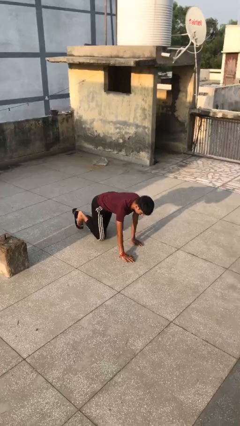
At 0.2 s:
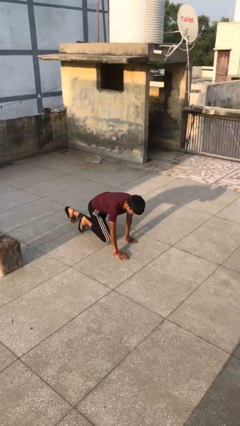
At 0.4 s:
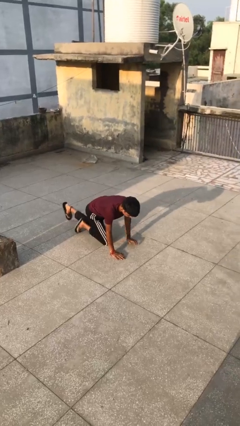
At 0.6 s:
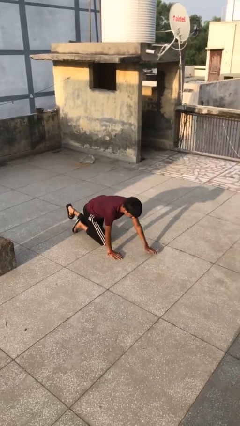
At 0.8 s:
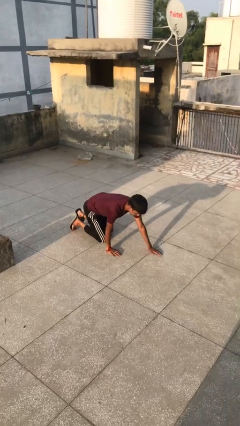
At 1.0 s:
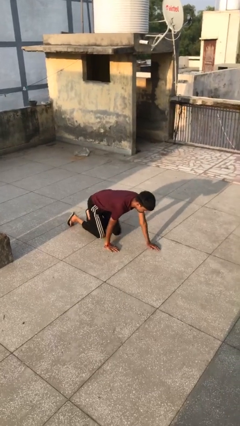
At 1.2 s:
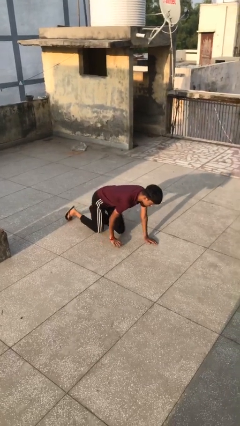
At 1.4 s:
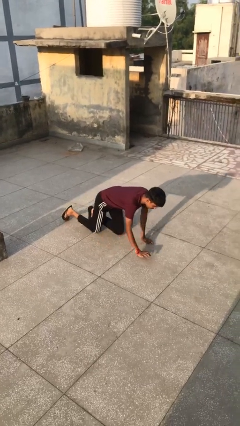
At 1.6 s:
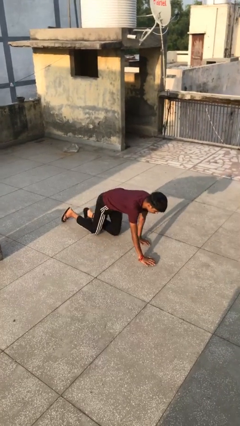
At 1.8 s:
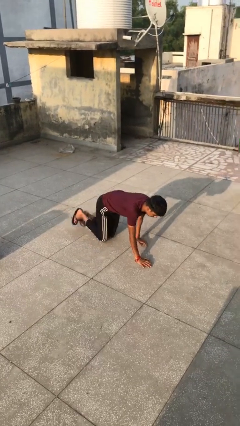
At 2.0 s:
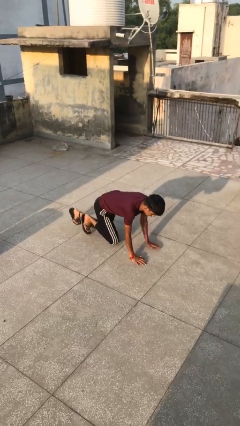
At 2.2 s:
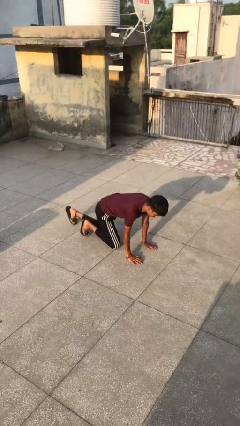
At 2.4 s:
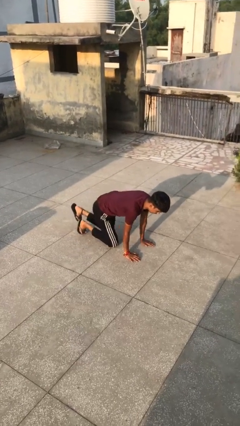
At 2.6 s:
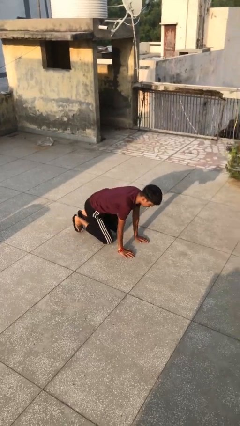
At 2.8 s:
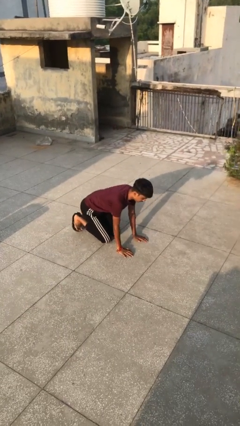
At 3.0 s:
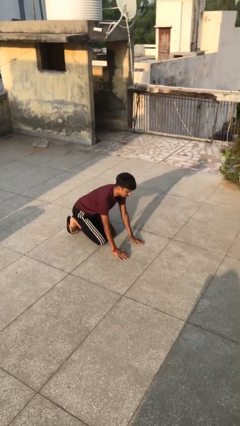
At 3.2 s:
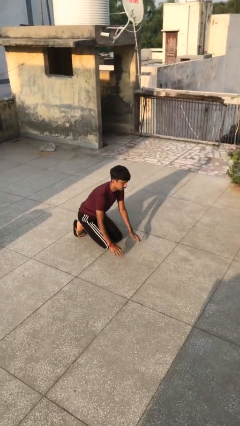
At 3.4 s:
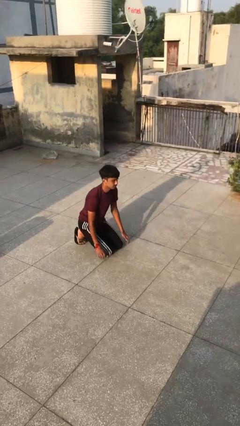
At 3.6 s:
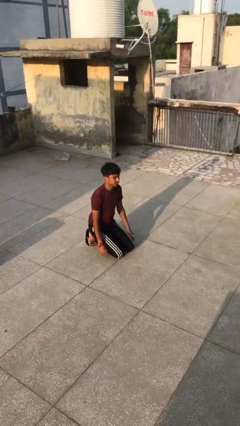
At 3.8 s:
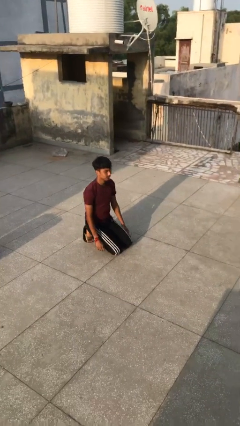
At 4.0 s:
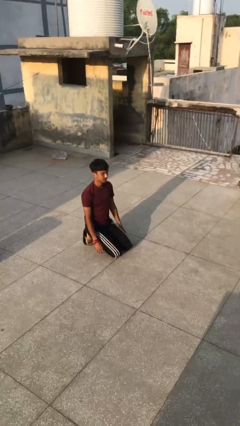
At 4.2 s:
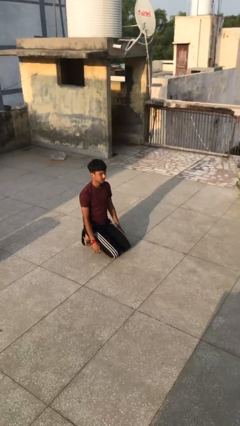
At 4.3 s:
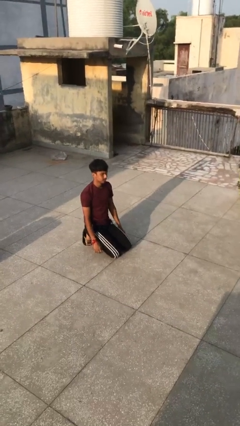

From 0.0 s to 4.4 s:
person crawls

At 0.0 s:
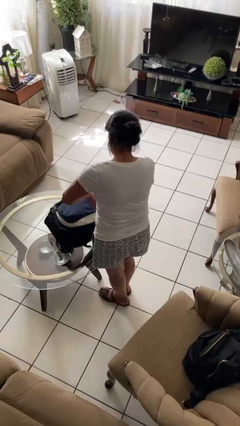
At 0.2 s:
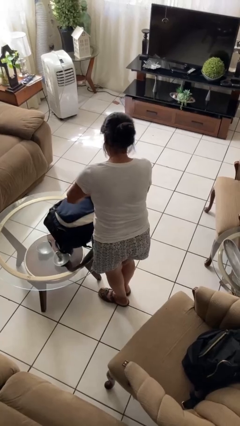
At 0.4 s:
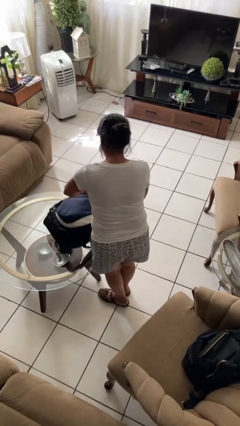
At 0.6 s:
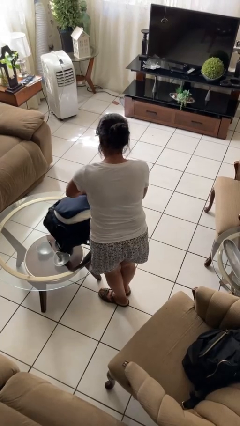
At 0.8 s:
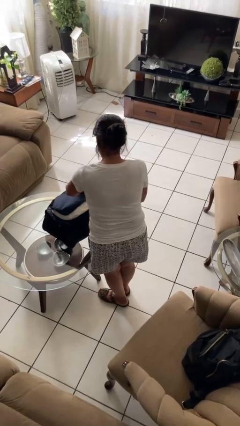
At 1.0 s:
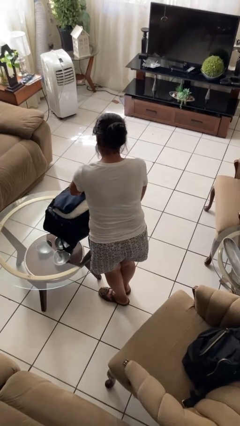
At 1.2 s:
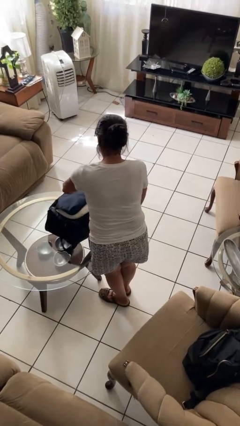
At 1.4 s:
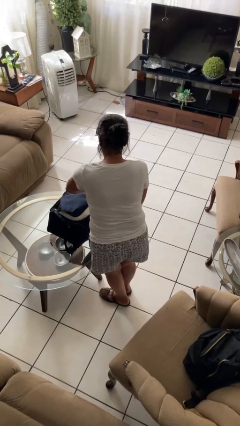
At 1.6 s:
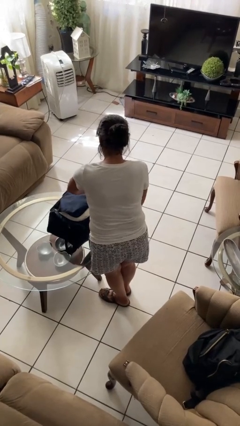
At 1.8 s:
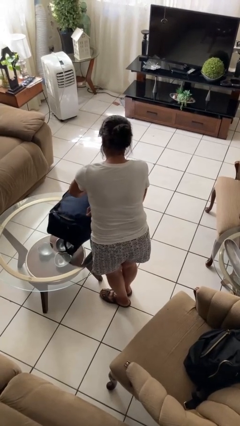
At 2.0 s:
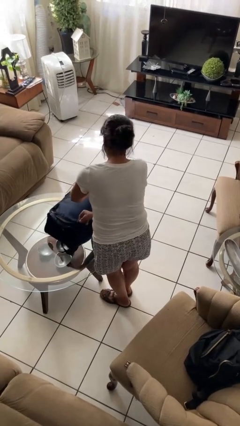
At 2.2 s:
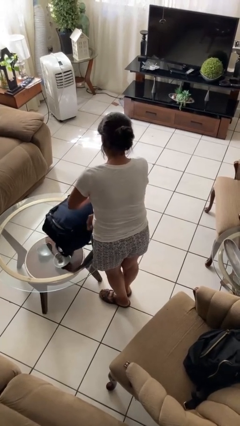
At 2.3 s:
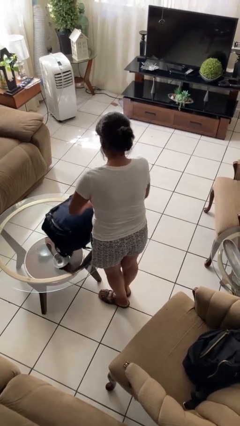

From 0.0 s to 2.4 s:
person closes suitcase

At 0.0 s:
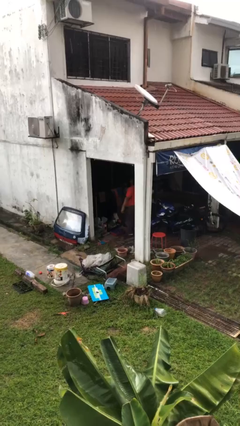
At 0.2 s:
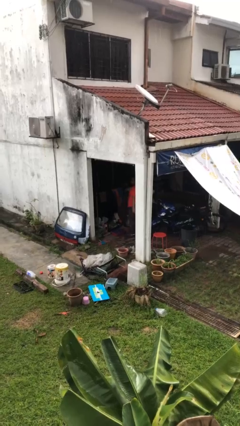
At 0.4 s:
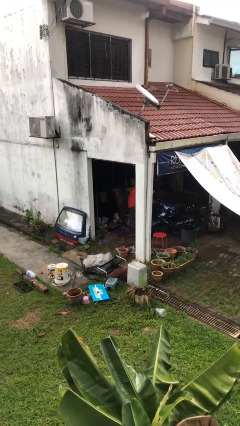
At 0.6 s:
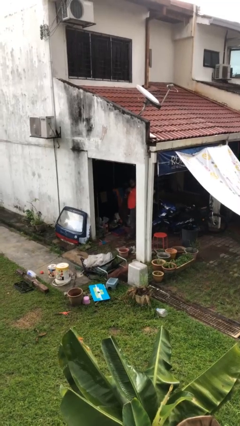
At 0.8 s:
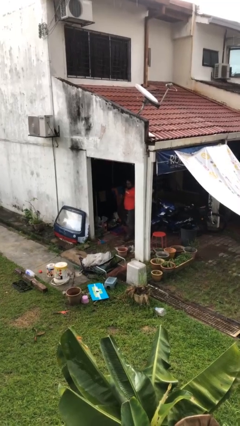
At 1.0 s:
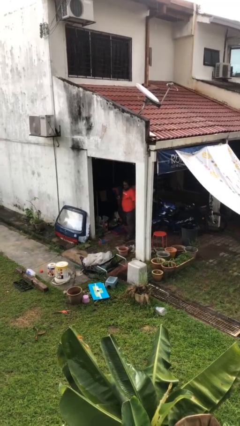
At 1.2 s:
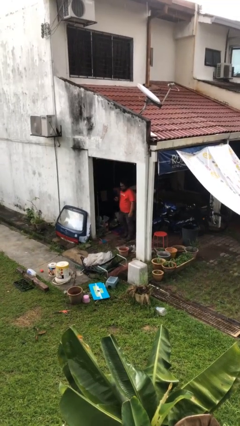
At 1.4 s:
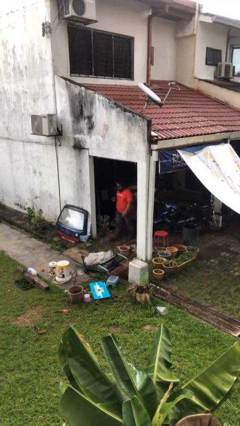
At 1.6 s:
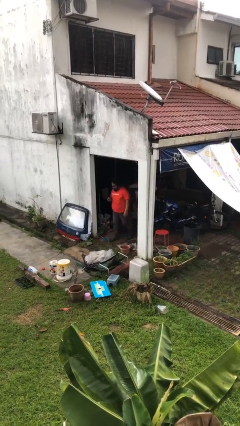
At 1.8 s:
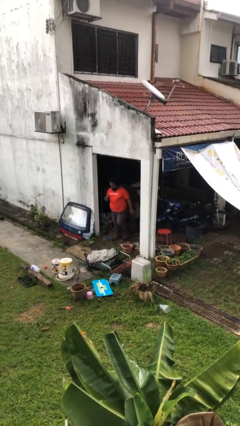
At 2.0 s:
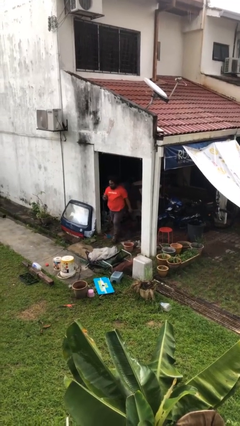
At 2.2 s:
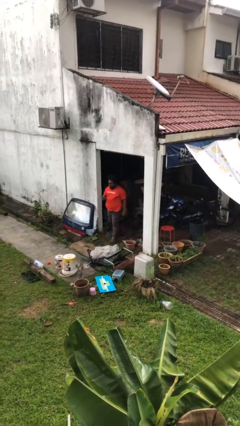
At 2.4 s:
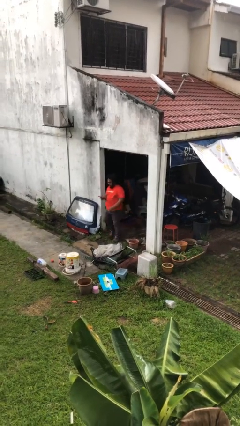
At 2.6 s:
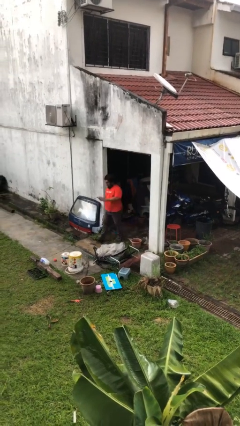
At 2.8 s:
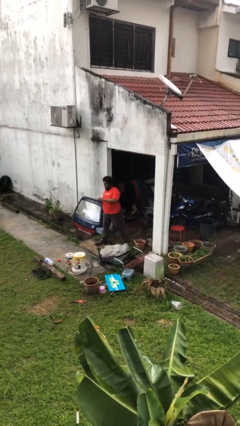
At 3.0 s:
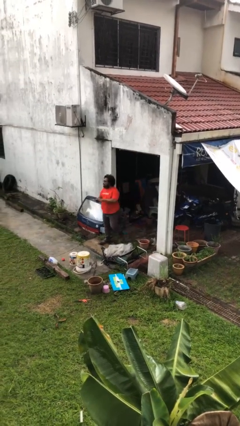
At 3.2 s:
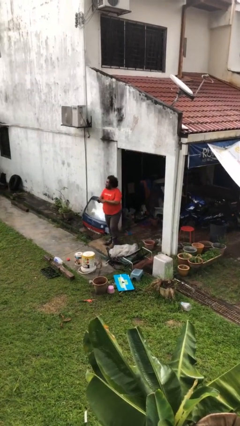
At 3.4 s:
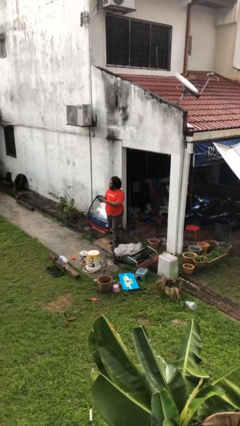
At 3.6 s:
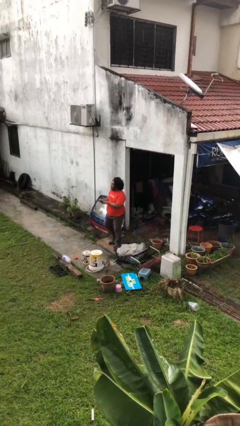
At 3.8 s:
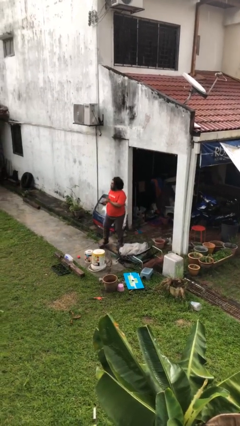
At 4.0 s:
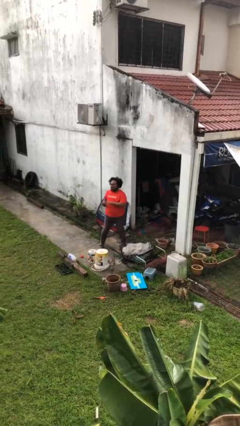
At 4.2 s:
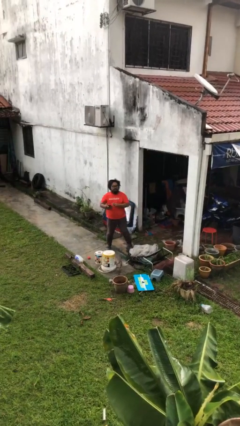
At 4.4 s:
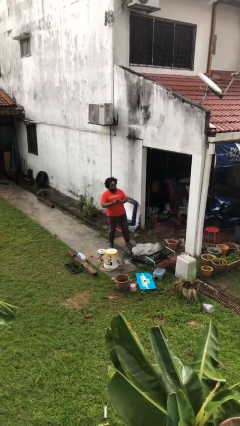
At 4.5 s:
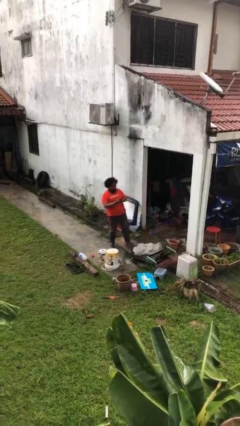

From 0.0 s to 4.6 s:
person enters scene through structure

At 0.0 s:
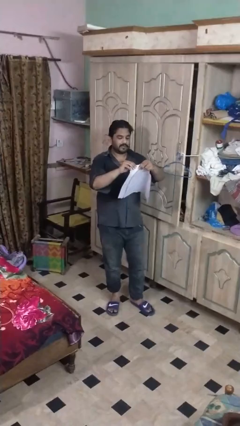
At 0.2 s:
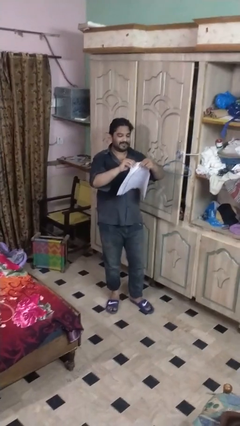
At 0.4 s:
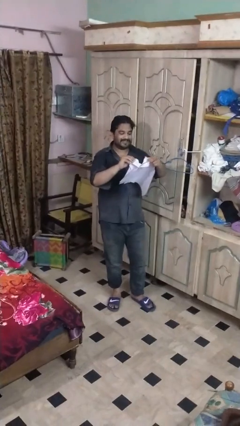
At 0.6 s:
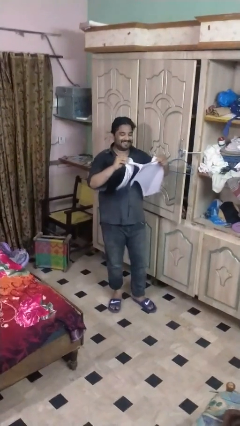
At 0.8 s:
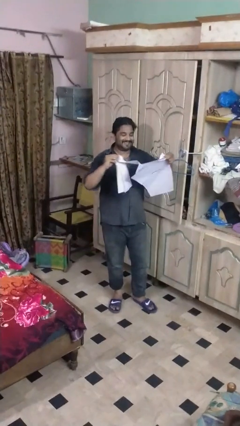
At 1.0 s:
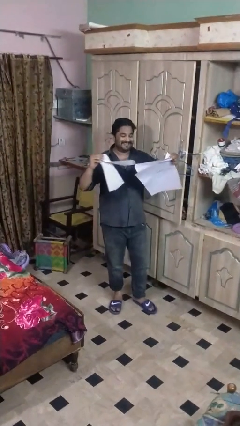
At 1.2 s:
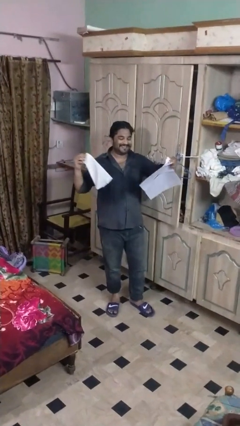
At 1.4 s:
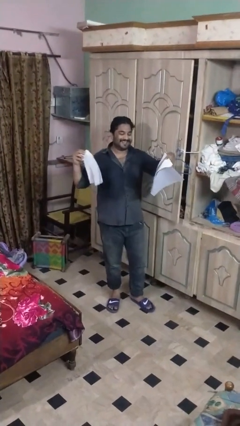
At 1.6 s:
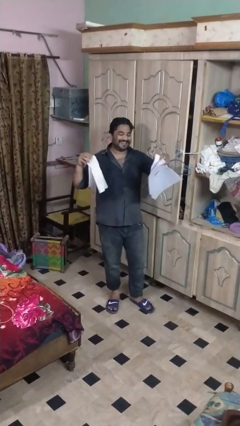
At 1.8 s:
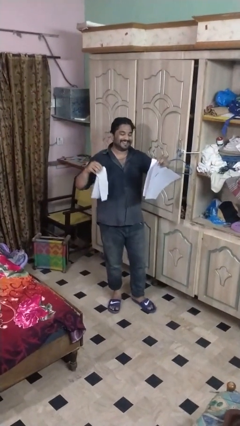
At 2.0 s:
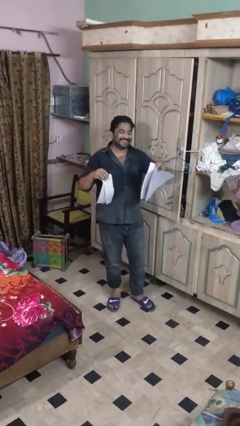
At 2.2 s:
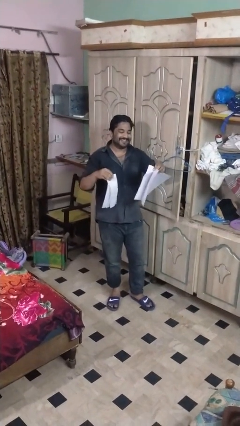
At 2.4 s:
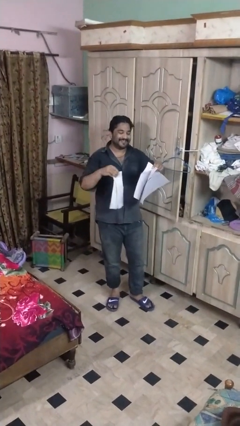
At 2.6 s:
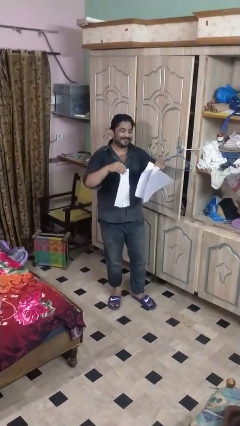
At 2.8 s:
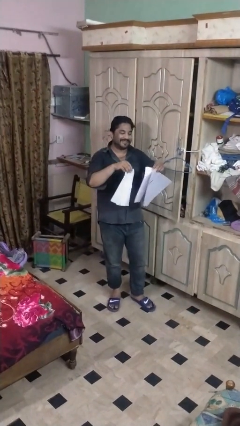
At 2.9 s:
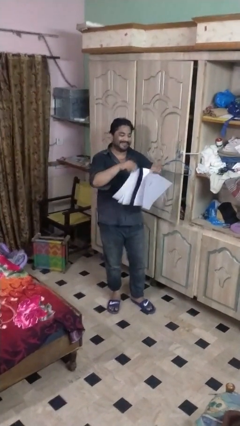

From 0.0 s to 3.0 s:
person tears paper

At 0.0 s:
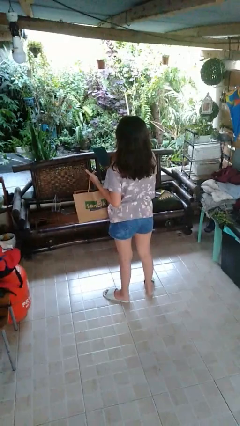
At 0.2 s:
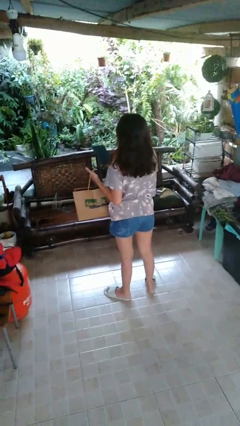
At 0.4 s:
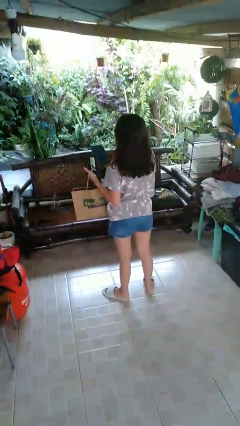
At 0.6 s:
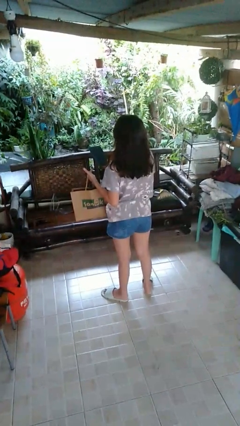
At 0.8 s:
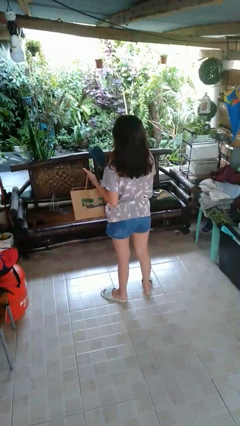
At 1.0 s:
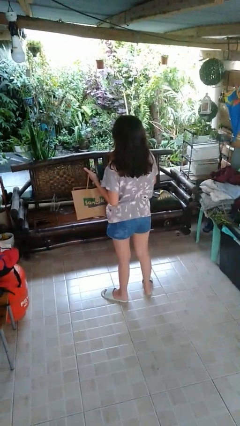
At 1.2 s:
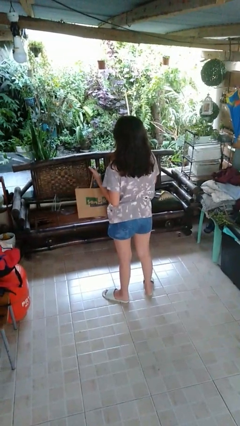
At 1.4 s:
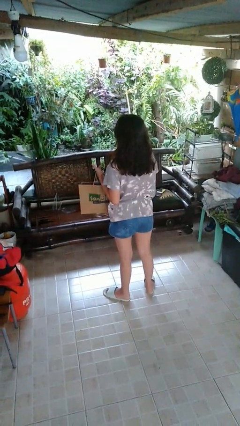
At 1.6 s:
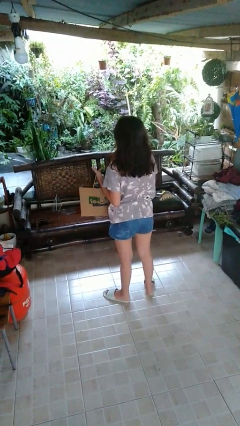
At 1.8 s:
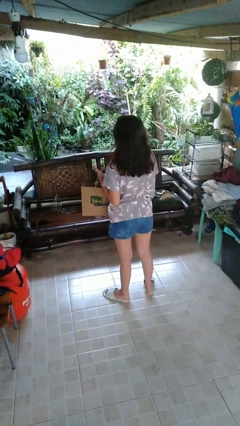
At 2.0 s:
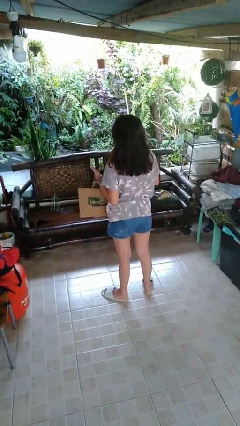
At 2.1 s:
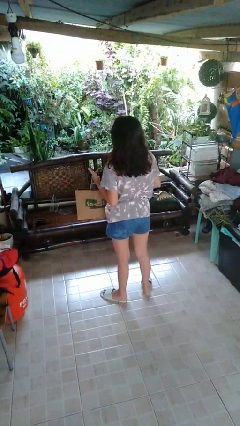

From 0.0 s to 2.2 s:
person puts object into bag

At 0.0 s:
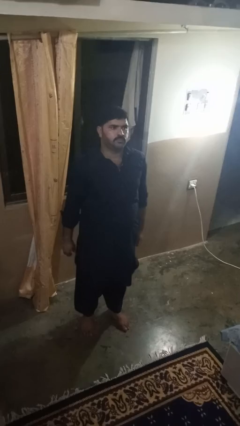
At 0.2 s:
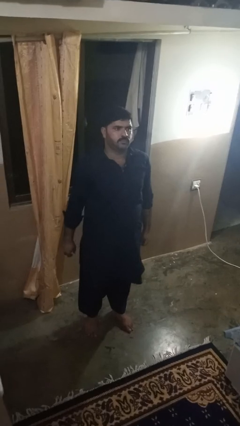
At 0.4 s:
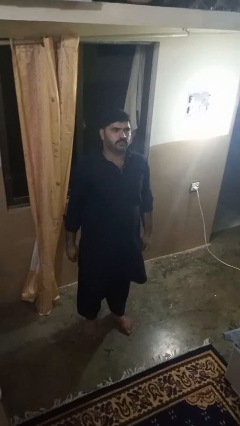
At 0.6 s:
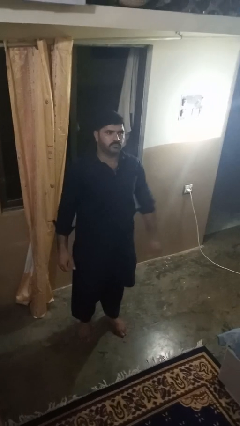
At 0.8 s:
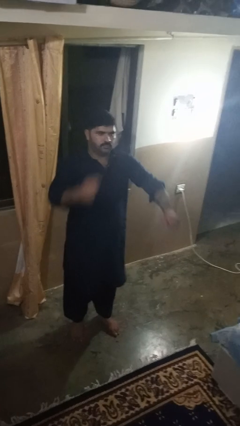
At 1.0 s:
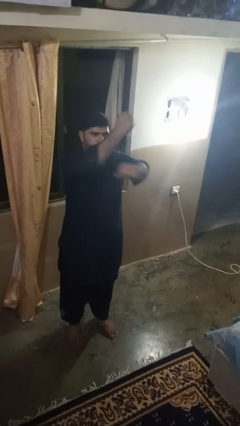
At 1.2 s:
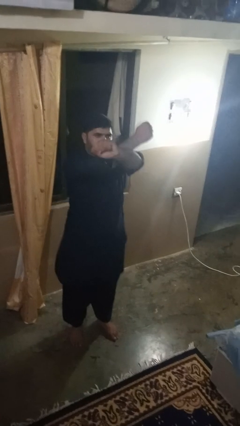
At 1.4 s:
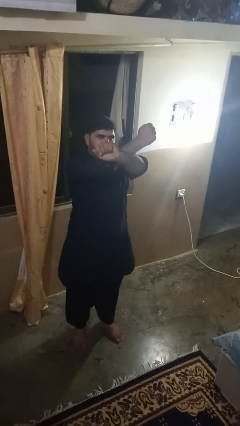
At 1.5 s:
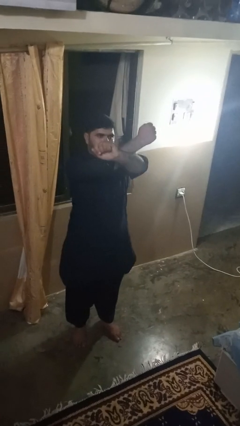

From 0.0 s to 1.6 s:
person crosses arms
